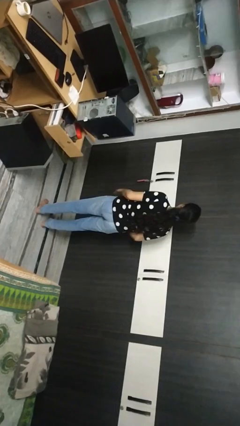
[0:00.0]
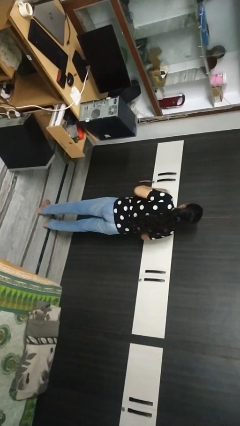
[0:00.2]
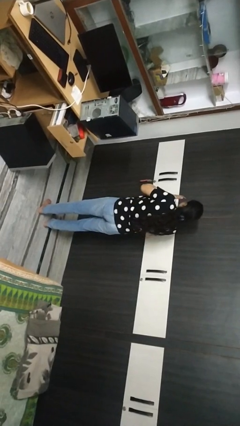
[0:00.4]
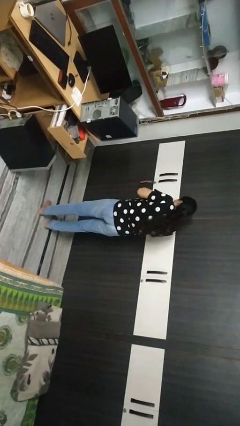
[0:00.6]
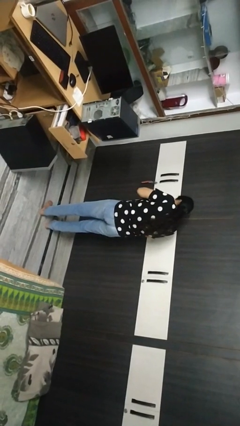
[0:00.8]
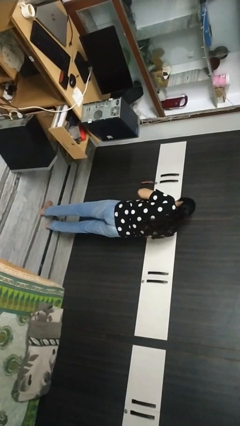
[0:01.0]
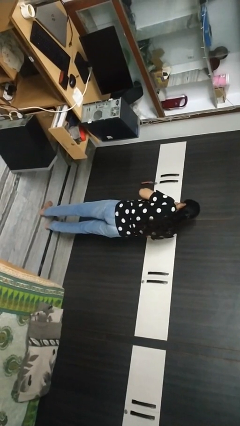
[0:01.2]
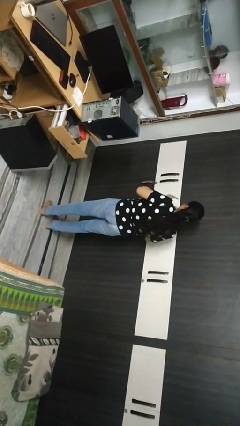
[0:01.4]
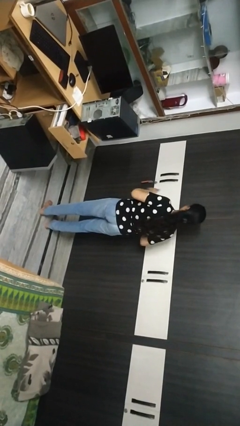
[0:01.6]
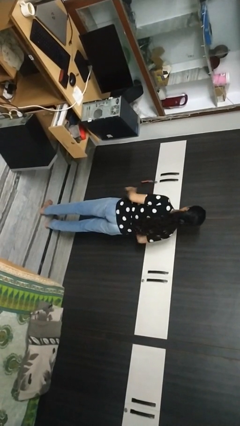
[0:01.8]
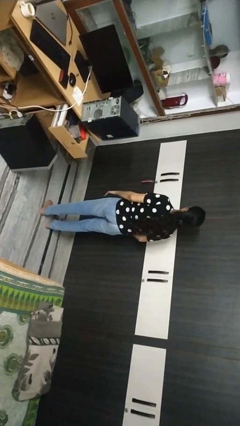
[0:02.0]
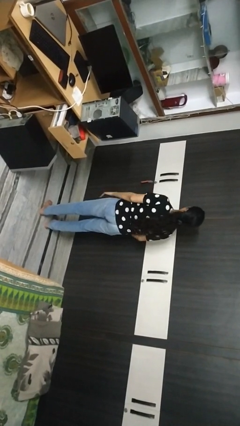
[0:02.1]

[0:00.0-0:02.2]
person sneezes into hand

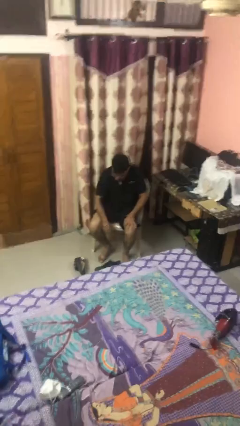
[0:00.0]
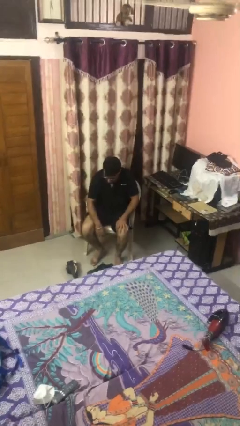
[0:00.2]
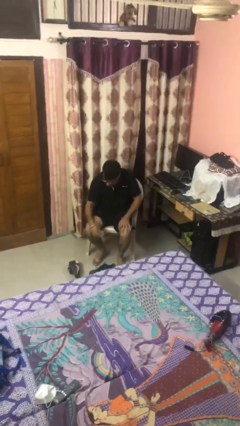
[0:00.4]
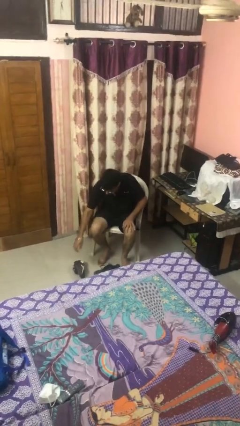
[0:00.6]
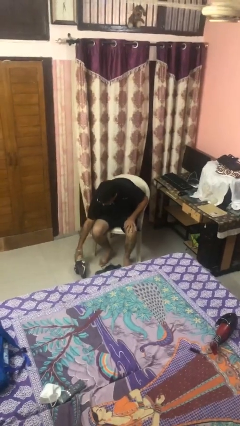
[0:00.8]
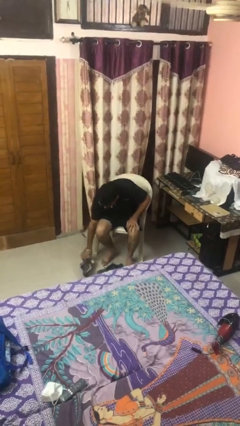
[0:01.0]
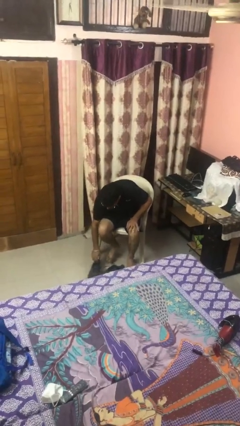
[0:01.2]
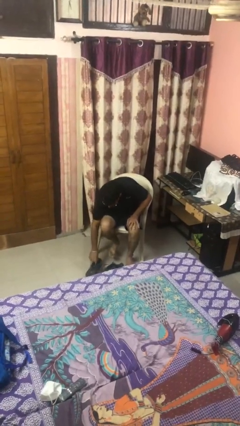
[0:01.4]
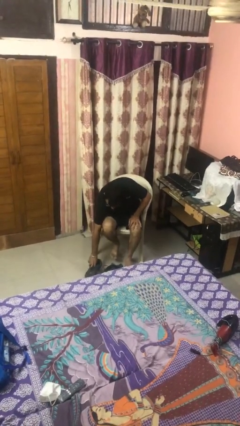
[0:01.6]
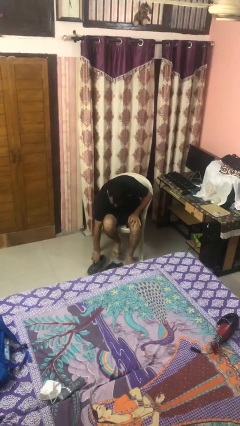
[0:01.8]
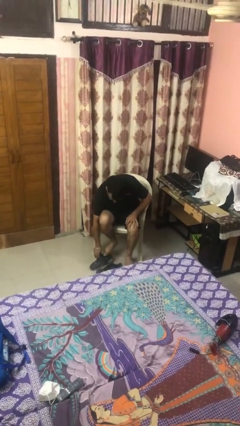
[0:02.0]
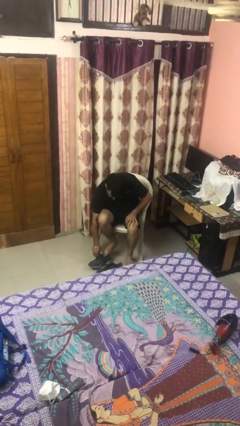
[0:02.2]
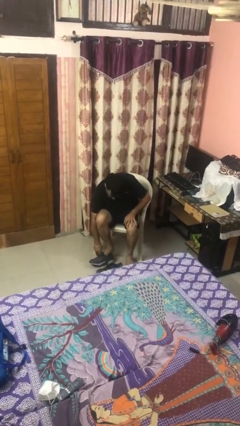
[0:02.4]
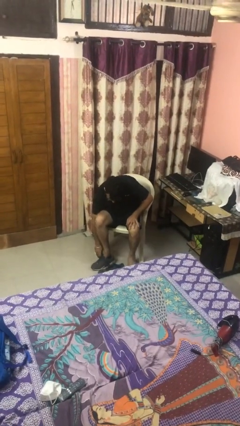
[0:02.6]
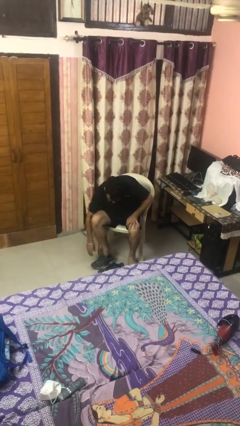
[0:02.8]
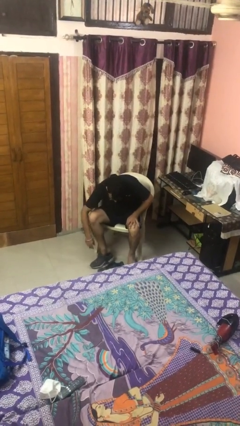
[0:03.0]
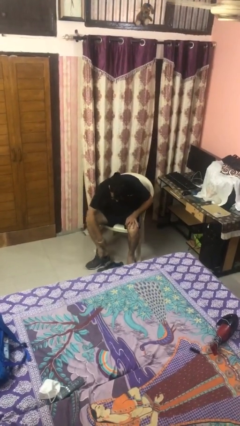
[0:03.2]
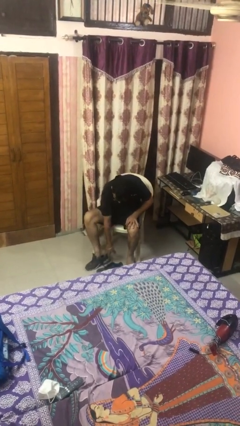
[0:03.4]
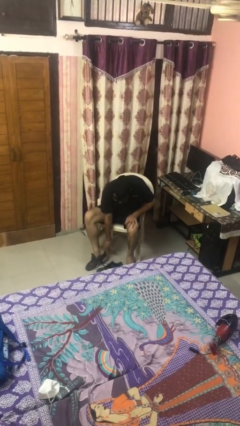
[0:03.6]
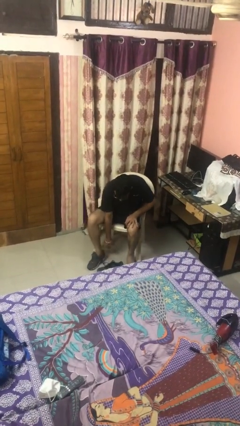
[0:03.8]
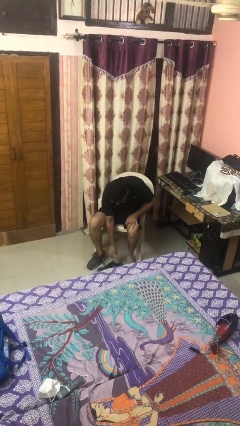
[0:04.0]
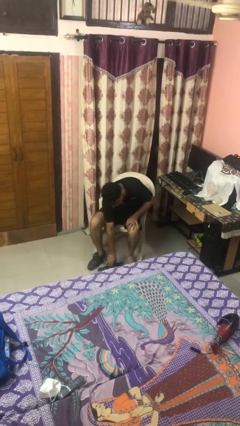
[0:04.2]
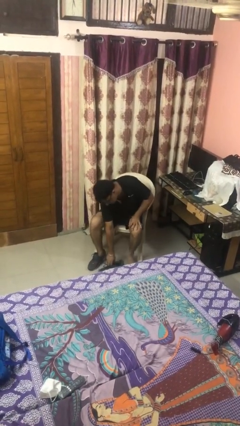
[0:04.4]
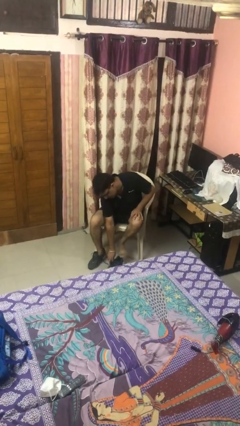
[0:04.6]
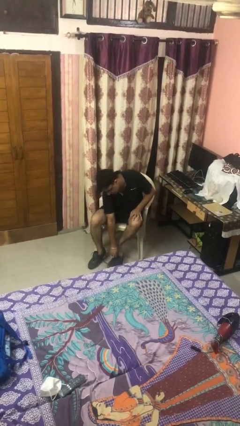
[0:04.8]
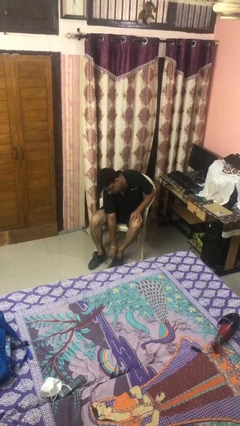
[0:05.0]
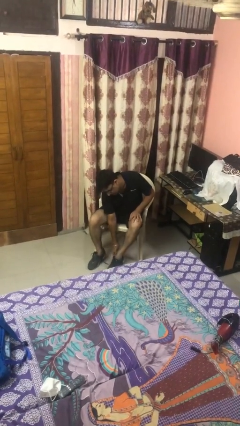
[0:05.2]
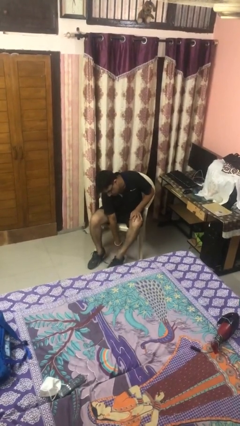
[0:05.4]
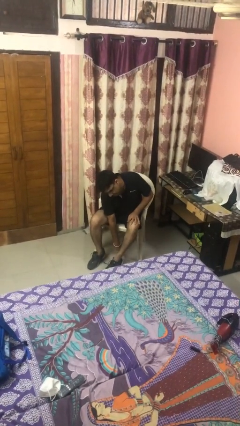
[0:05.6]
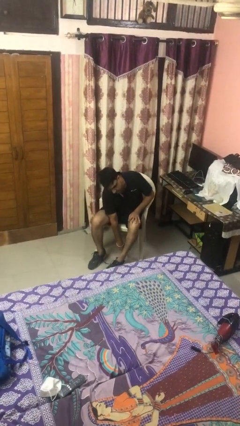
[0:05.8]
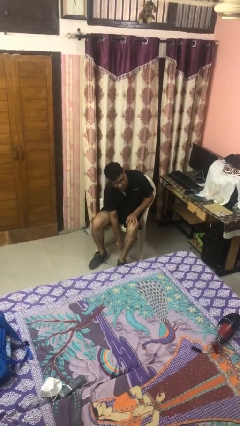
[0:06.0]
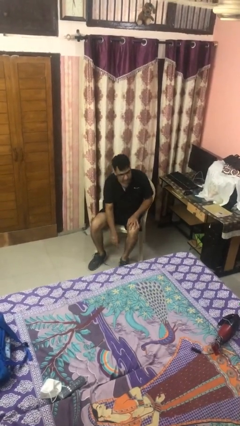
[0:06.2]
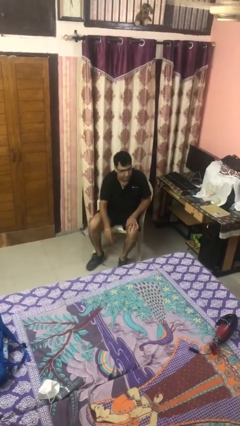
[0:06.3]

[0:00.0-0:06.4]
person puts on shoes

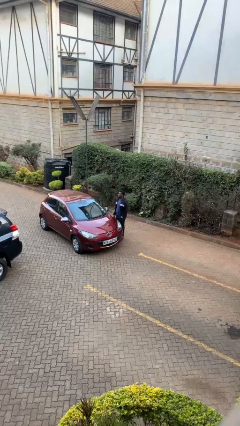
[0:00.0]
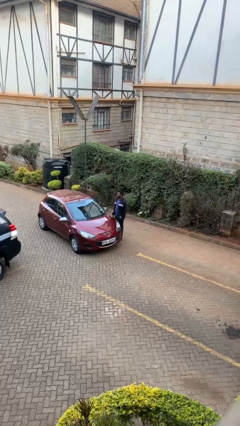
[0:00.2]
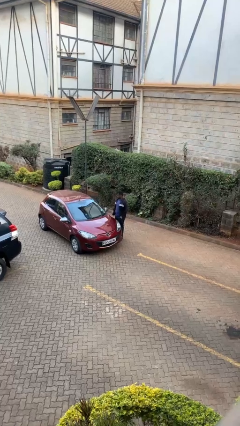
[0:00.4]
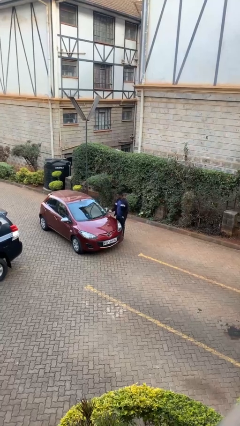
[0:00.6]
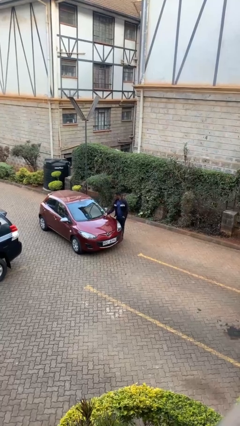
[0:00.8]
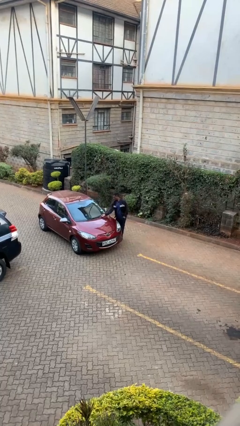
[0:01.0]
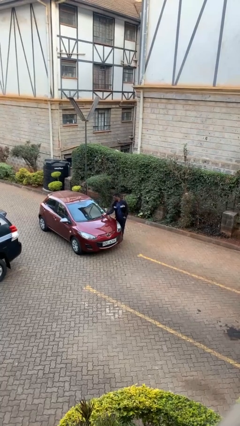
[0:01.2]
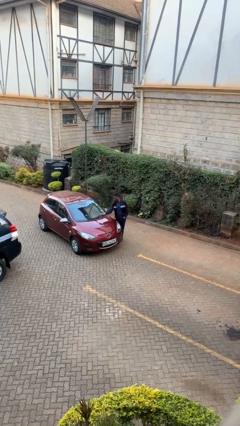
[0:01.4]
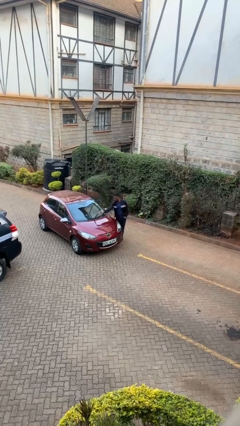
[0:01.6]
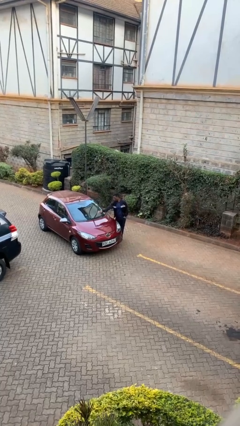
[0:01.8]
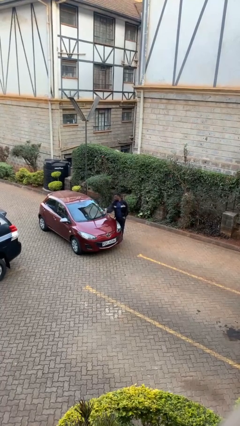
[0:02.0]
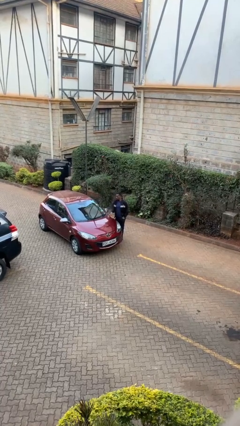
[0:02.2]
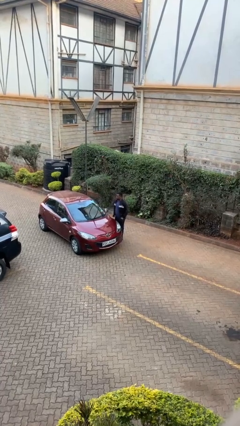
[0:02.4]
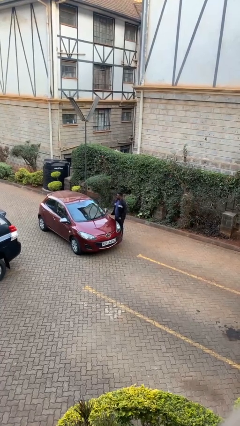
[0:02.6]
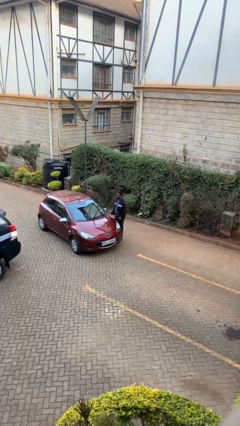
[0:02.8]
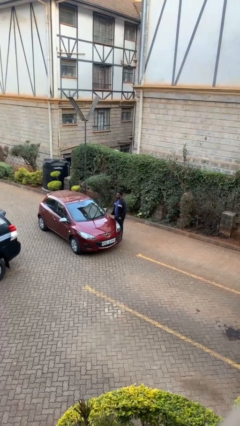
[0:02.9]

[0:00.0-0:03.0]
person flips up car wipers

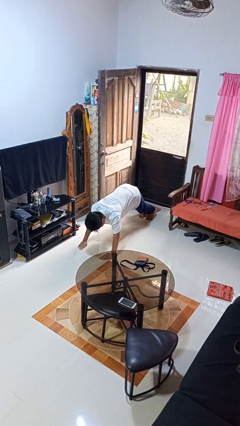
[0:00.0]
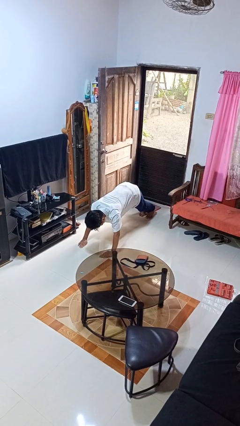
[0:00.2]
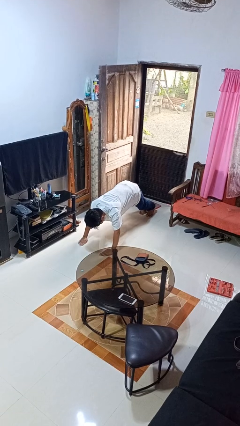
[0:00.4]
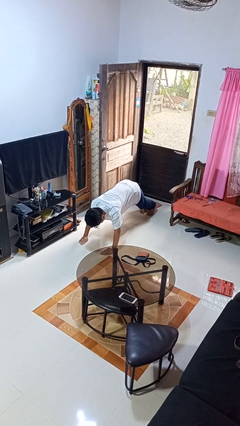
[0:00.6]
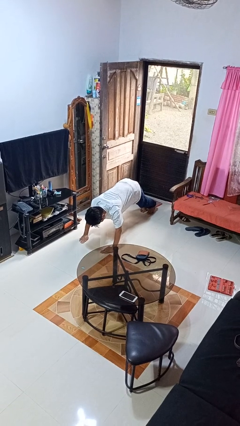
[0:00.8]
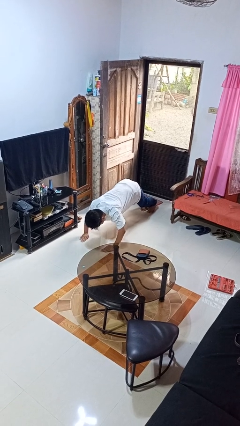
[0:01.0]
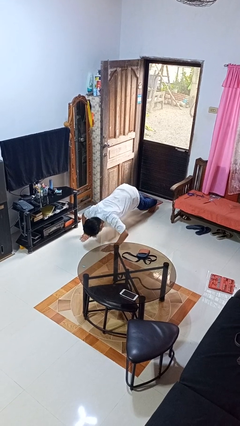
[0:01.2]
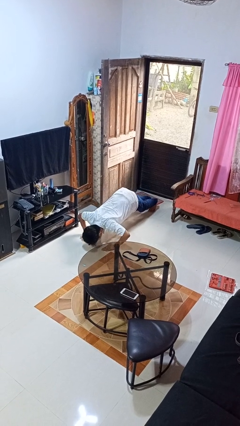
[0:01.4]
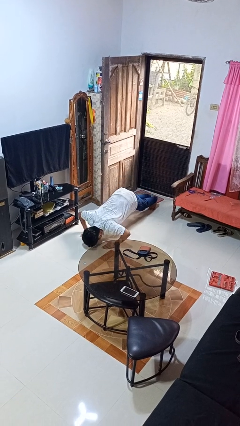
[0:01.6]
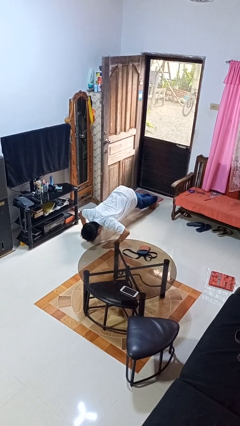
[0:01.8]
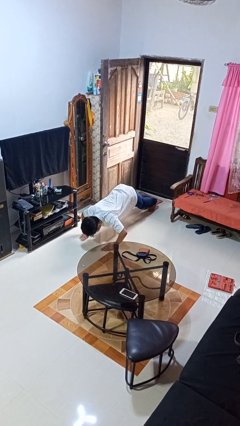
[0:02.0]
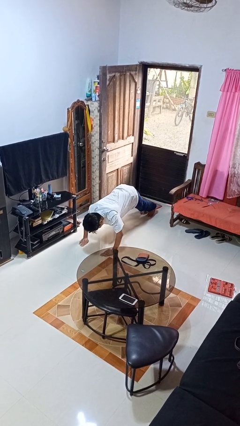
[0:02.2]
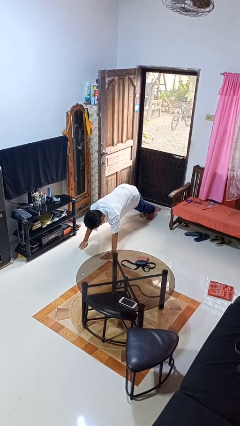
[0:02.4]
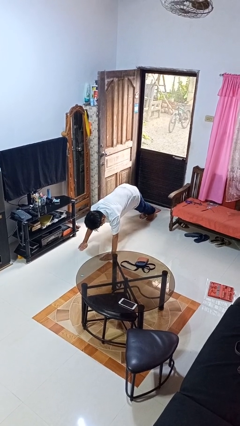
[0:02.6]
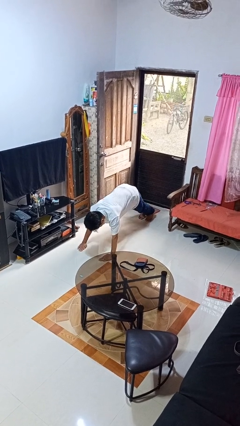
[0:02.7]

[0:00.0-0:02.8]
person exercises with pushup

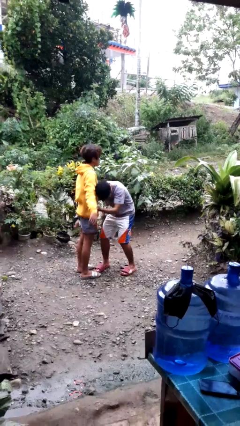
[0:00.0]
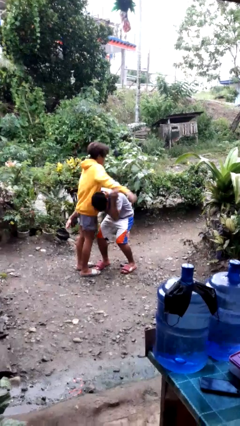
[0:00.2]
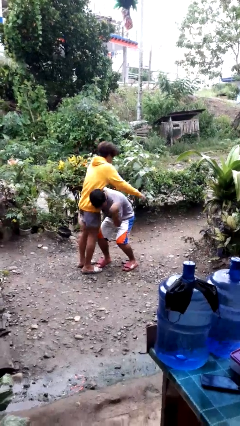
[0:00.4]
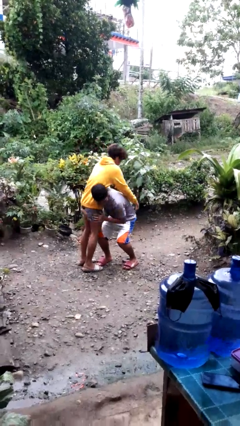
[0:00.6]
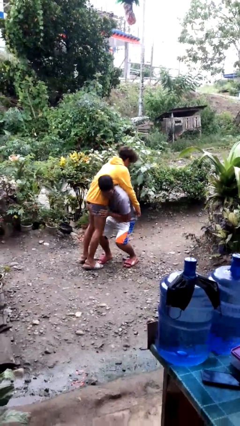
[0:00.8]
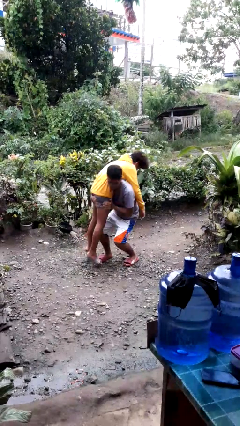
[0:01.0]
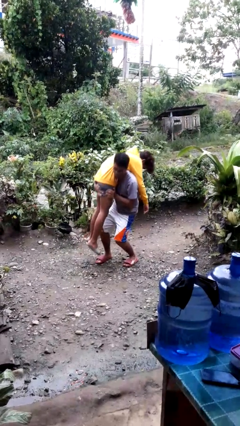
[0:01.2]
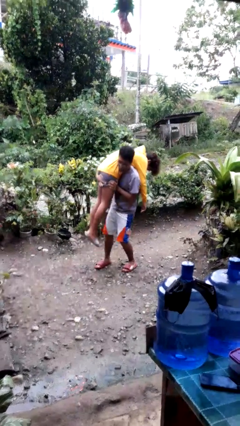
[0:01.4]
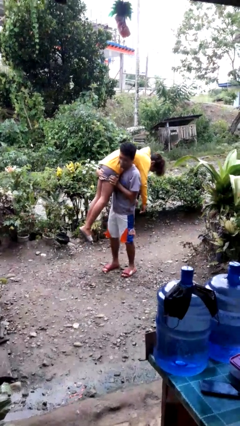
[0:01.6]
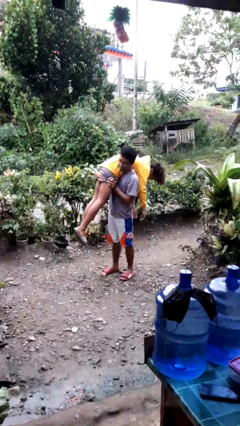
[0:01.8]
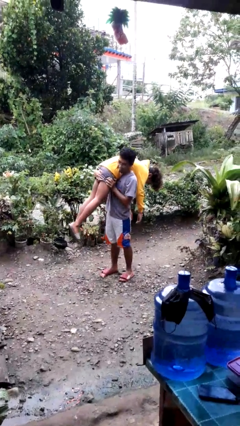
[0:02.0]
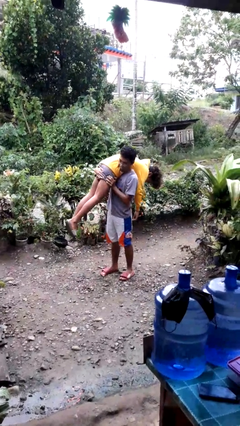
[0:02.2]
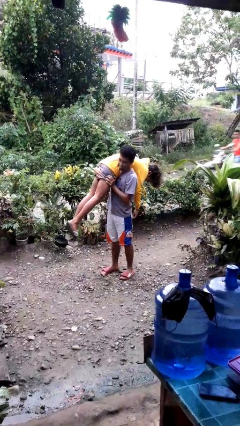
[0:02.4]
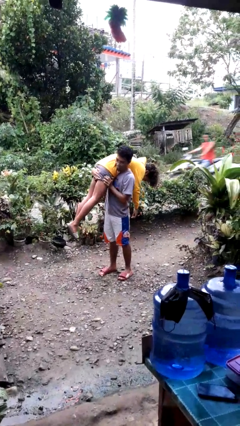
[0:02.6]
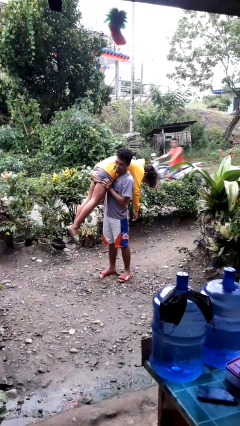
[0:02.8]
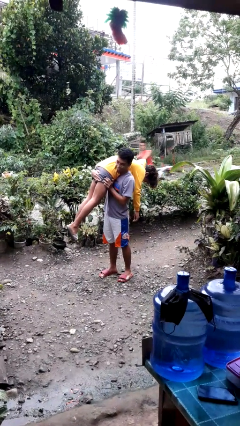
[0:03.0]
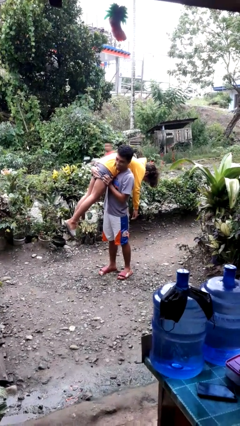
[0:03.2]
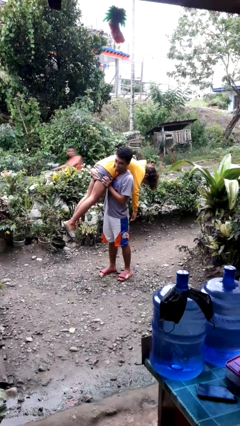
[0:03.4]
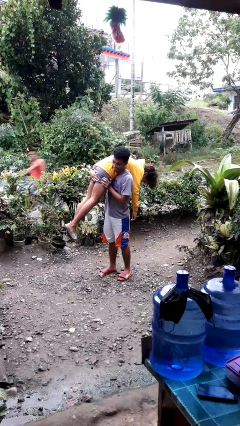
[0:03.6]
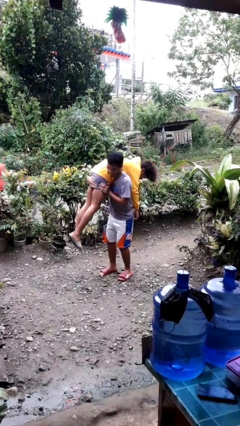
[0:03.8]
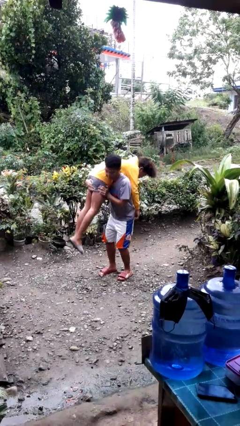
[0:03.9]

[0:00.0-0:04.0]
person carries person over shoulder
